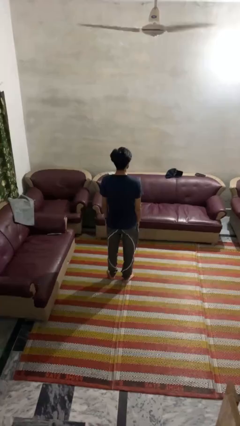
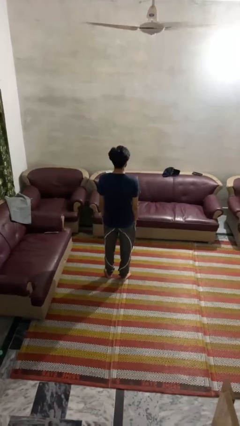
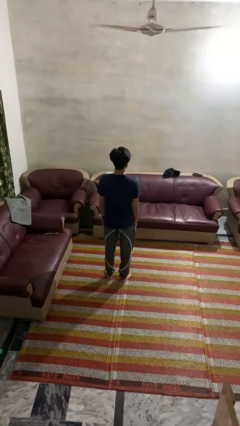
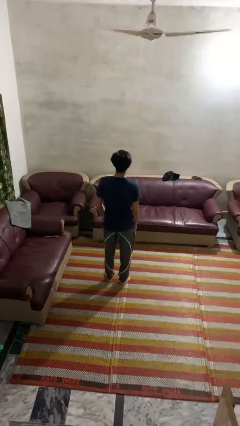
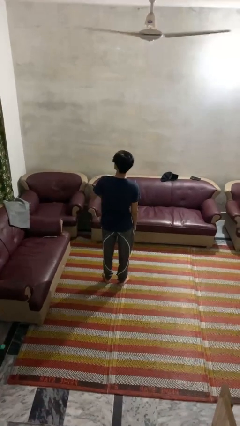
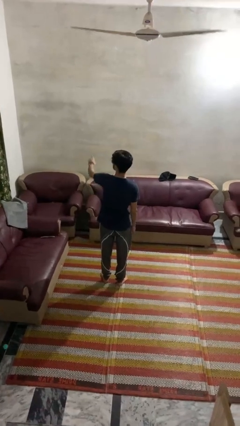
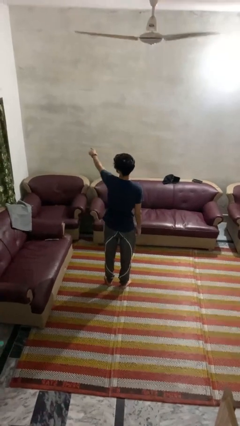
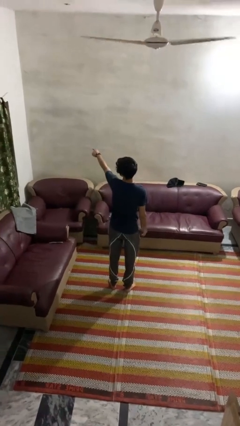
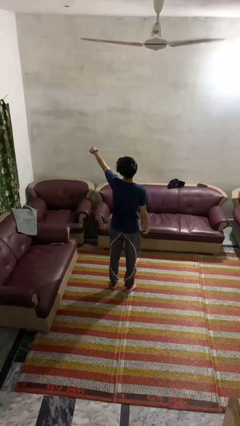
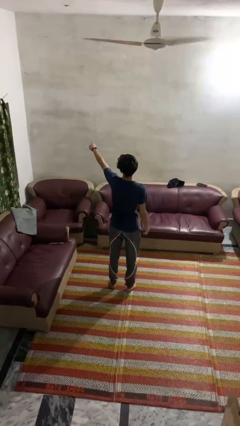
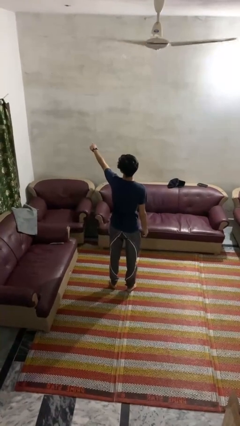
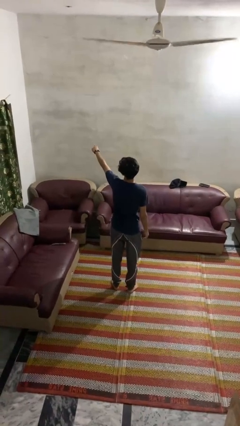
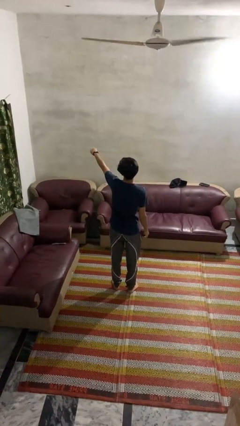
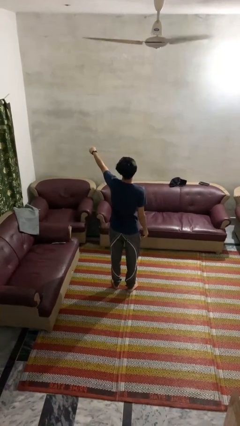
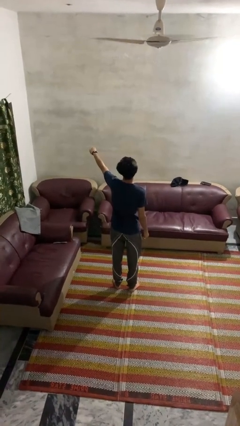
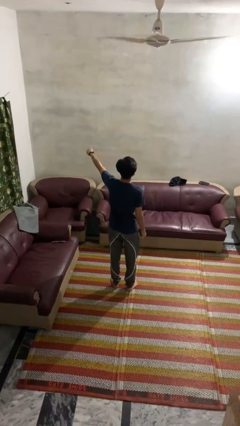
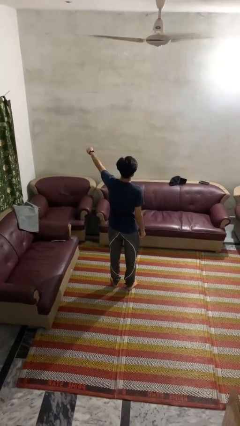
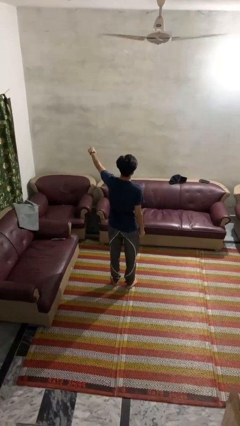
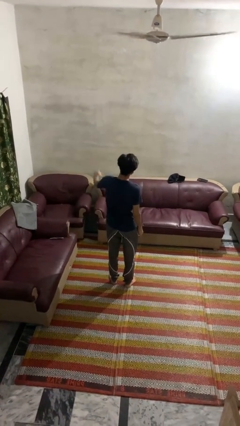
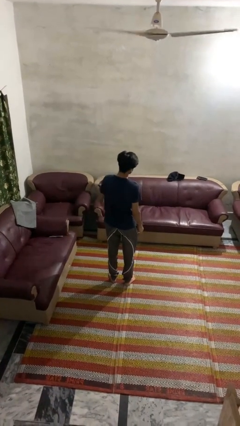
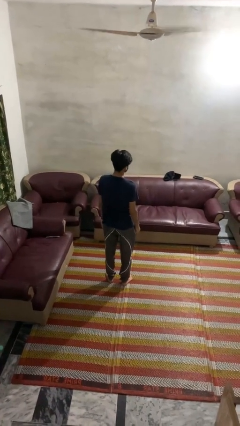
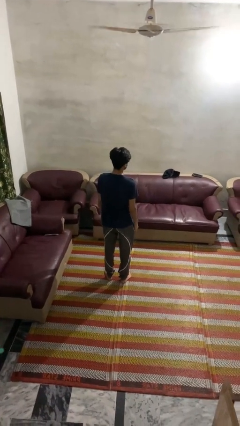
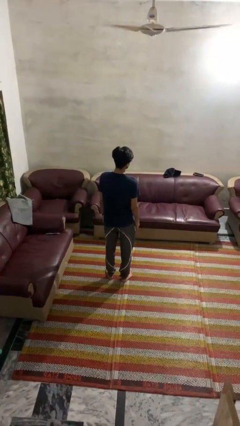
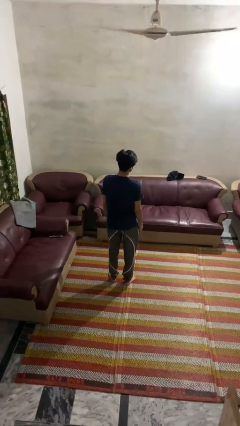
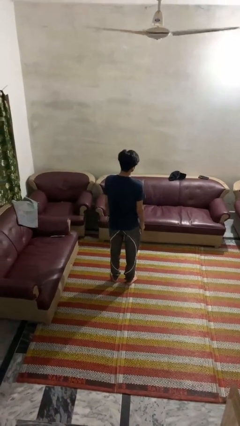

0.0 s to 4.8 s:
person points at person

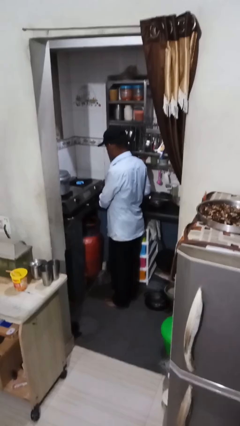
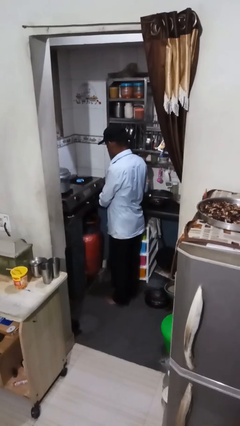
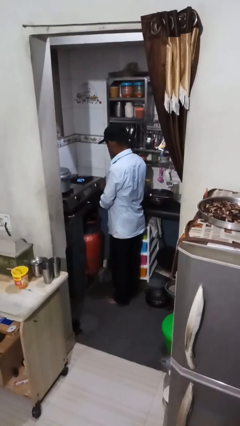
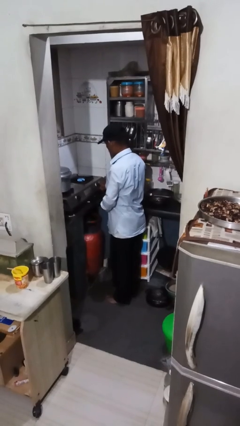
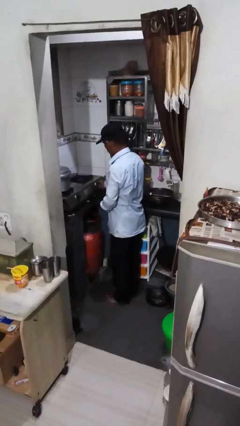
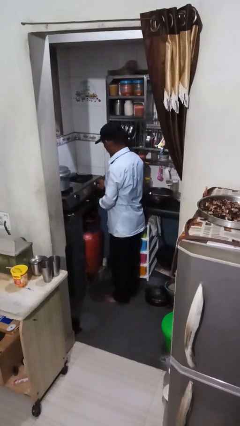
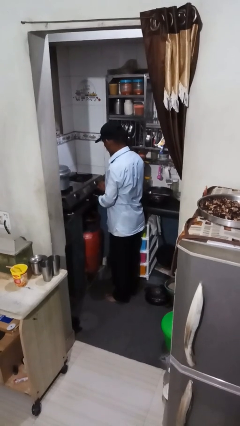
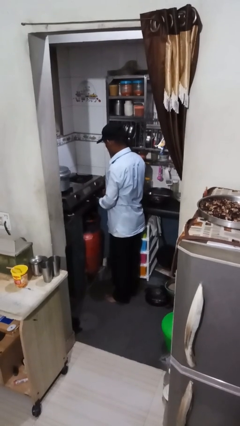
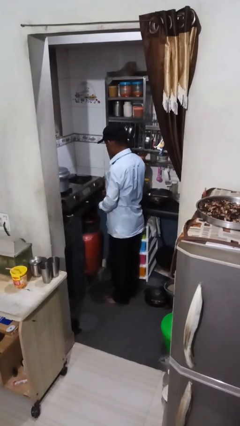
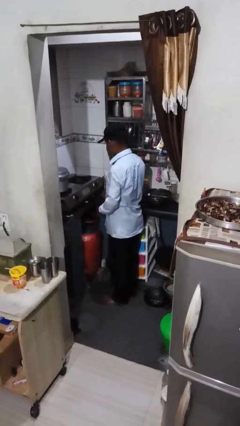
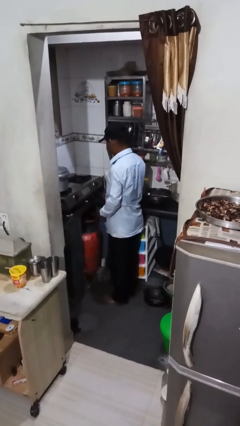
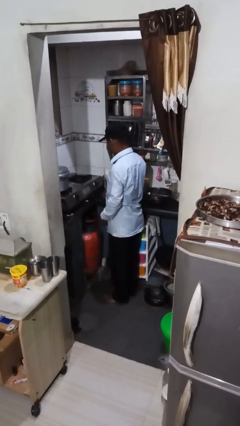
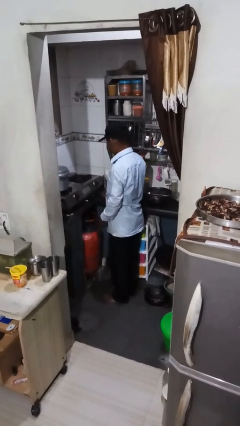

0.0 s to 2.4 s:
person turns off stovetop

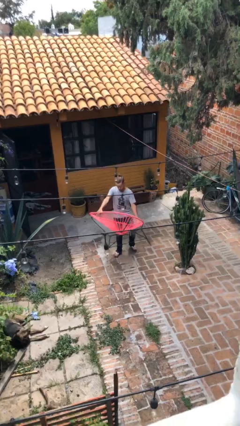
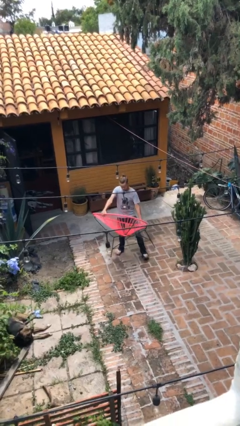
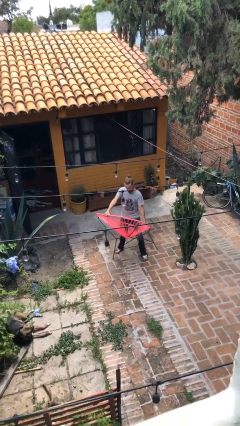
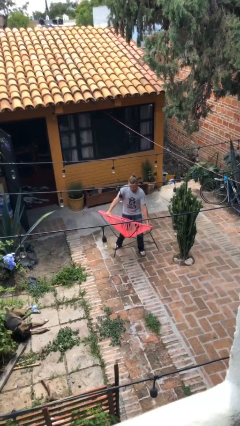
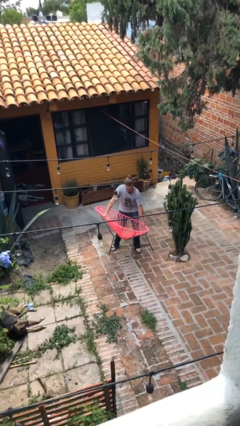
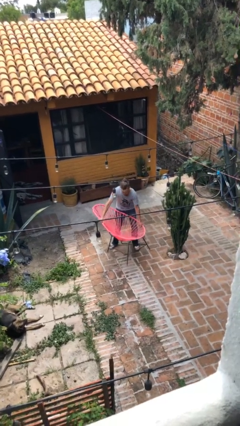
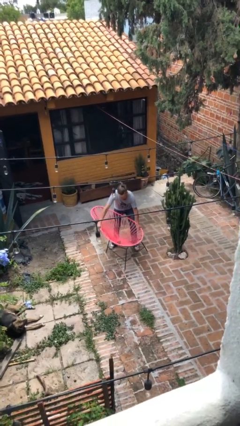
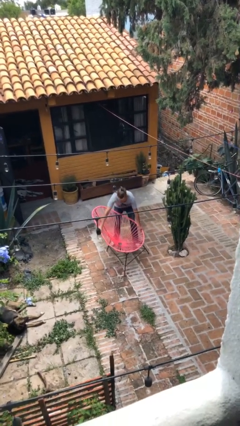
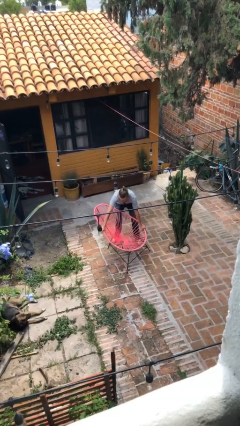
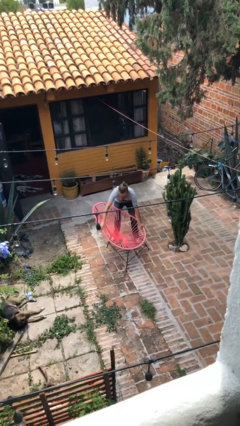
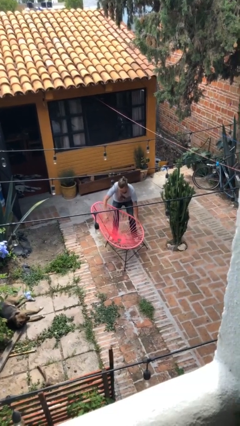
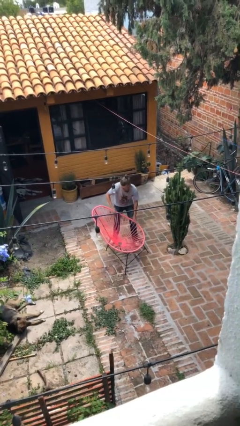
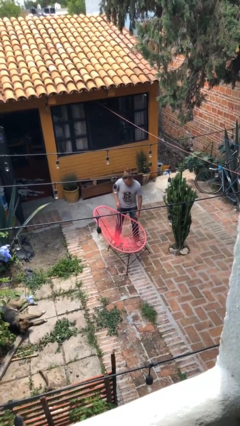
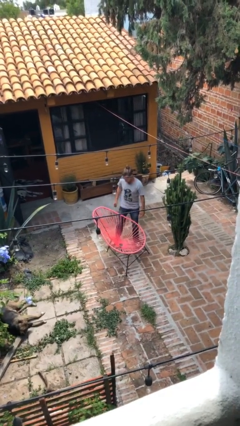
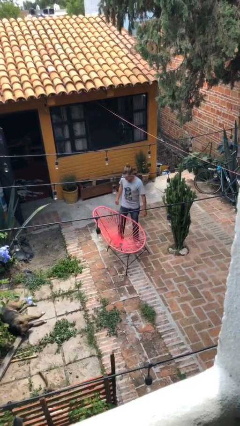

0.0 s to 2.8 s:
person puts down object on floor

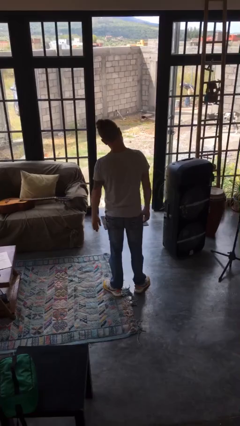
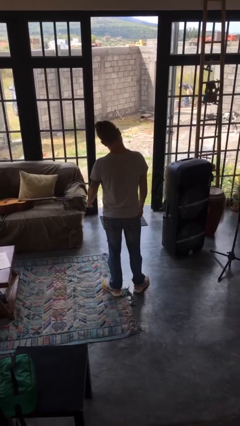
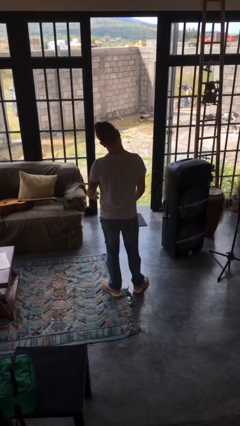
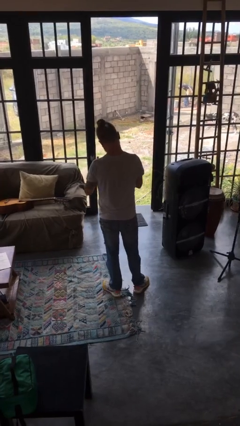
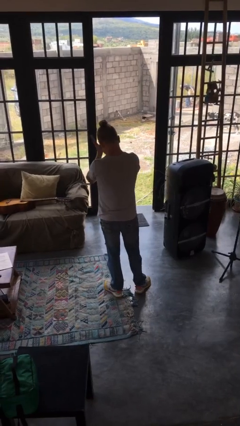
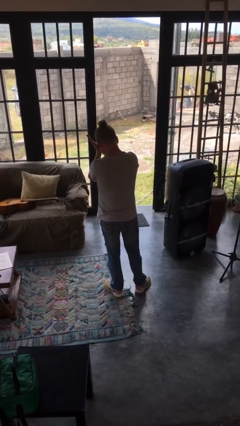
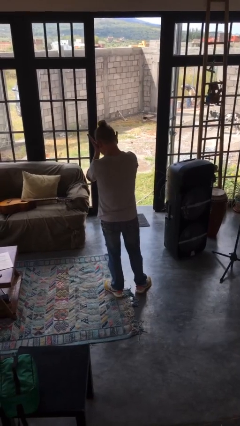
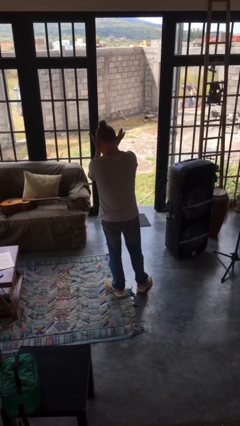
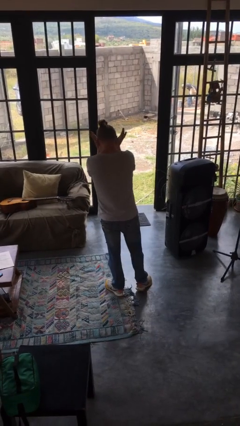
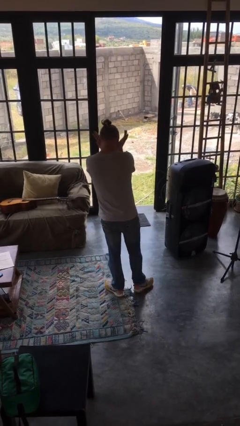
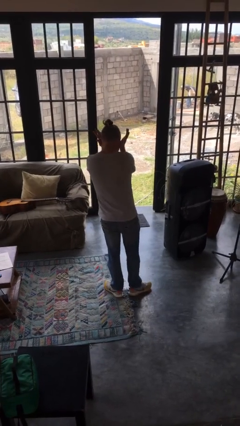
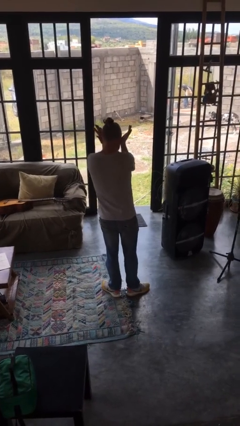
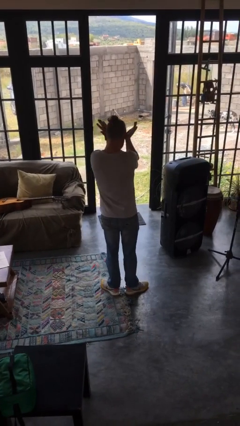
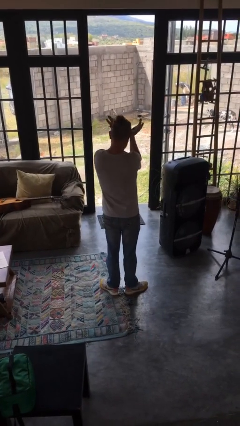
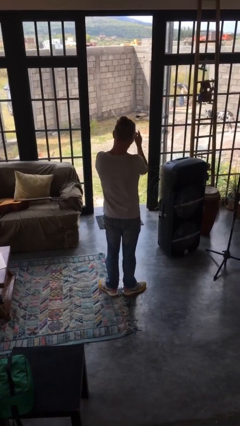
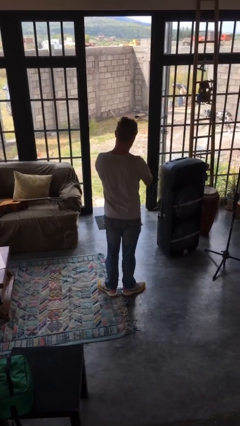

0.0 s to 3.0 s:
person rubs eyes

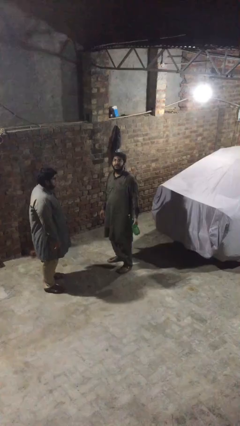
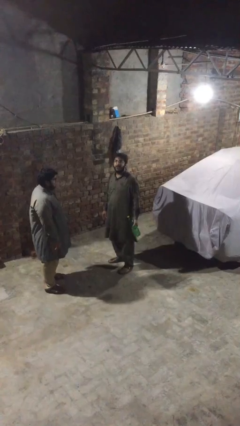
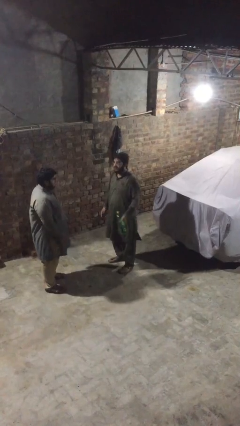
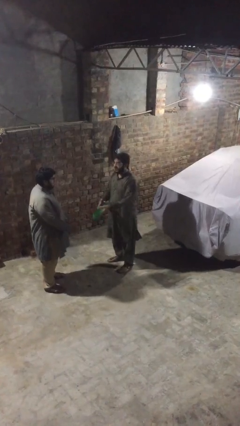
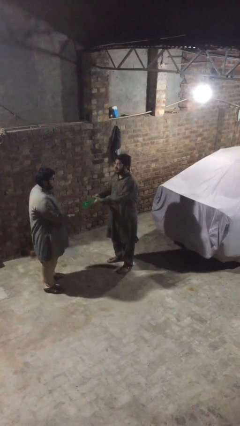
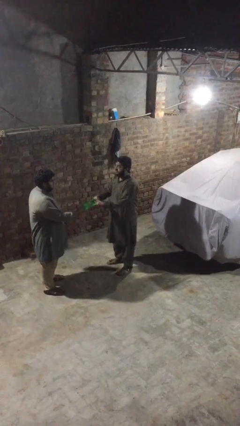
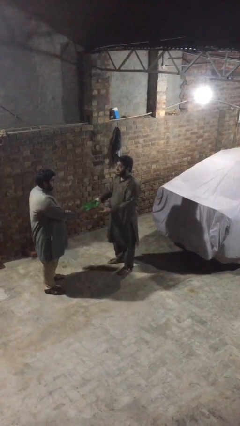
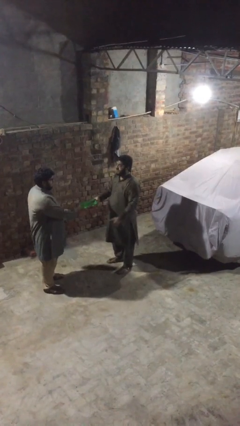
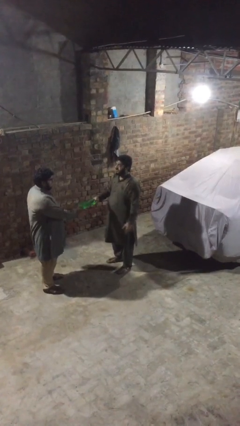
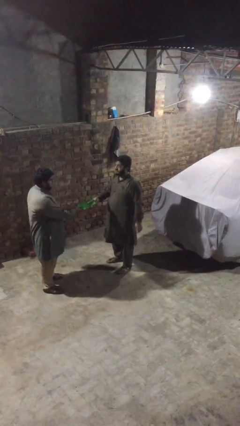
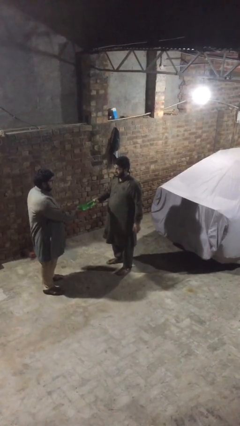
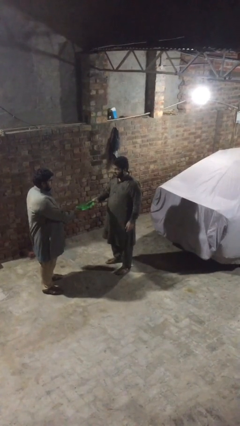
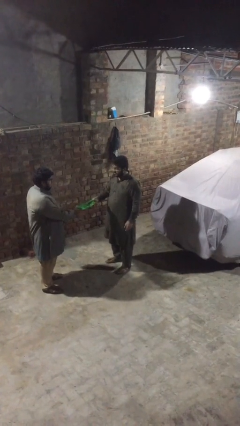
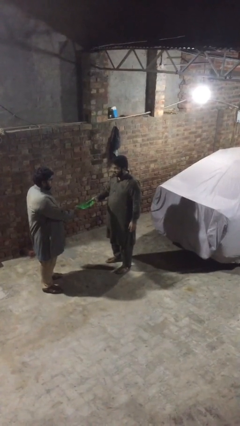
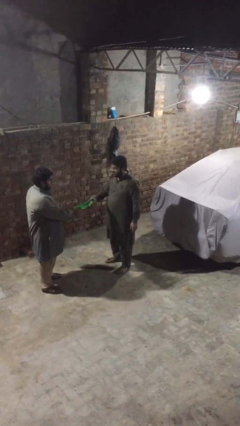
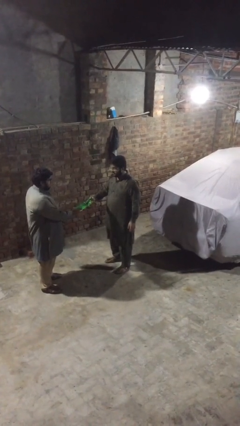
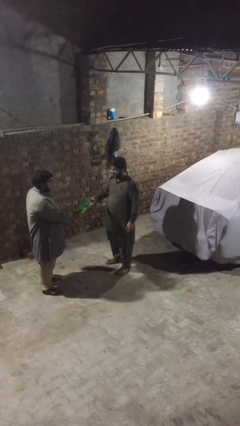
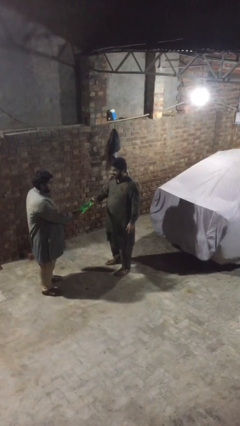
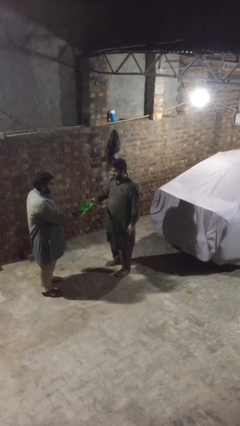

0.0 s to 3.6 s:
person transfers object to person

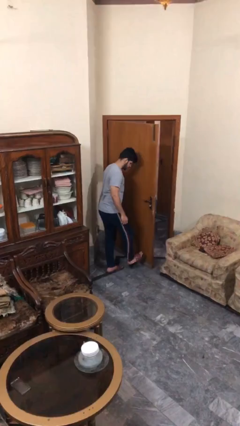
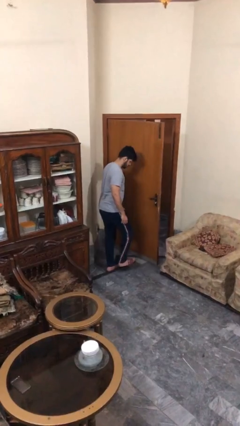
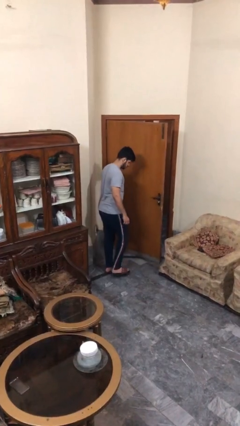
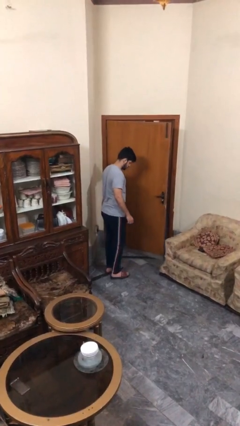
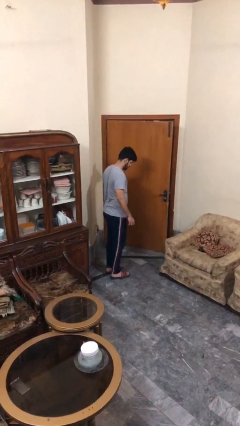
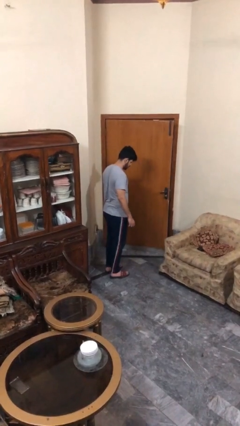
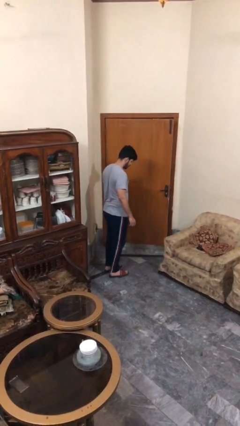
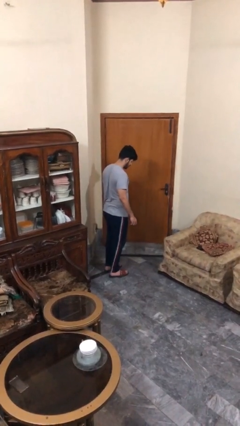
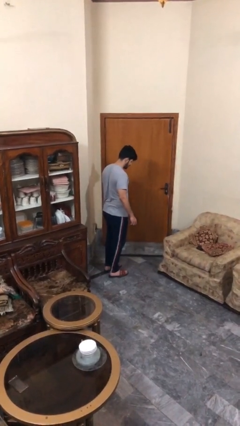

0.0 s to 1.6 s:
person closes door with foot
